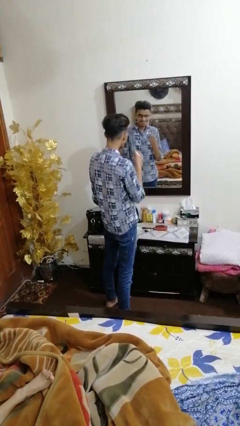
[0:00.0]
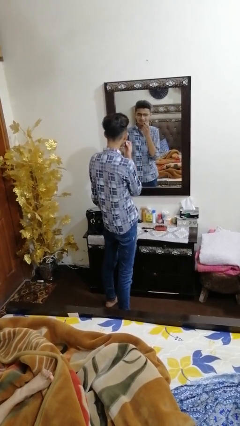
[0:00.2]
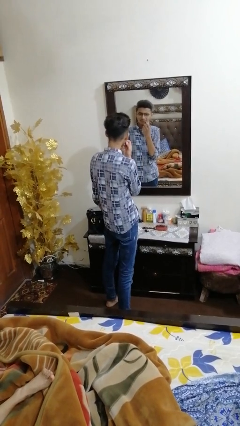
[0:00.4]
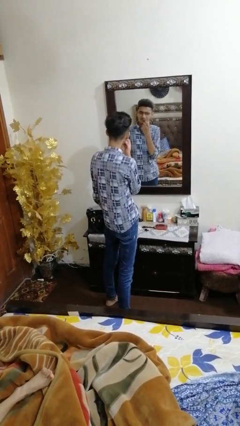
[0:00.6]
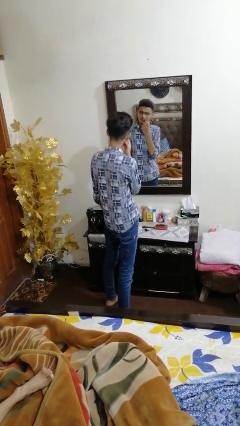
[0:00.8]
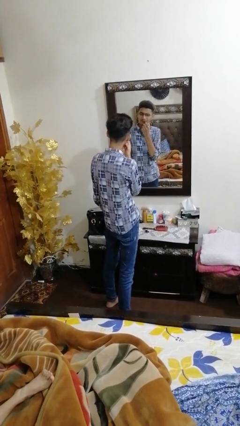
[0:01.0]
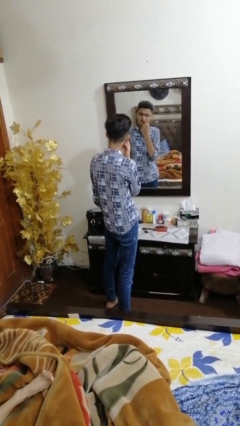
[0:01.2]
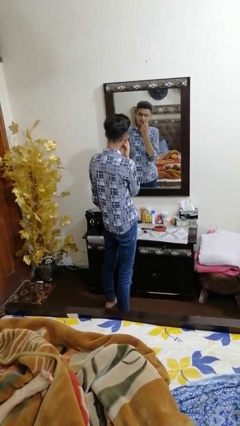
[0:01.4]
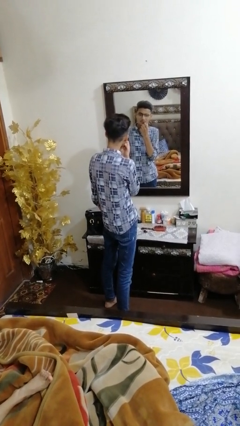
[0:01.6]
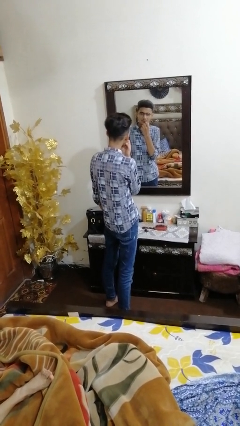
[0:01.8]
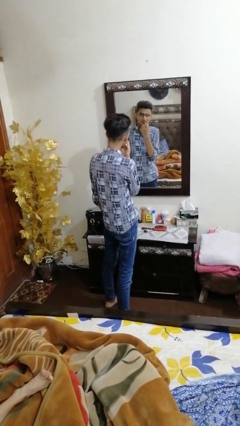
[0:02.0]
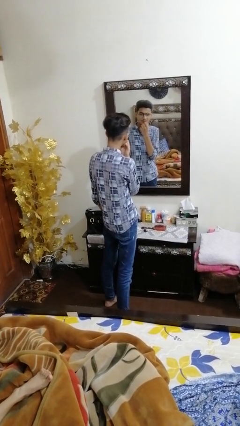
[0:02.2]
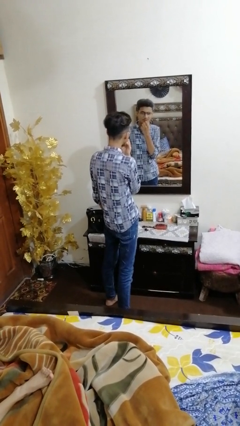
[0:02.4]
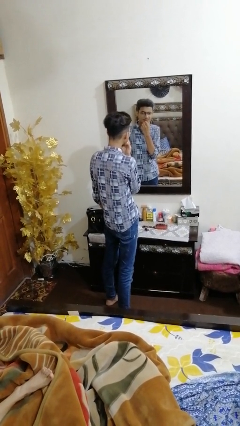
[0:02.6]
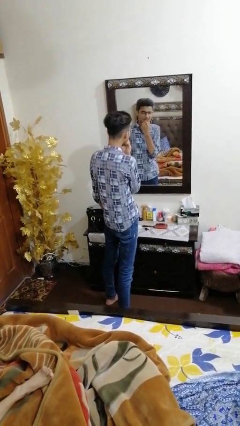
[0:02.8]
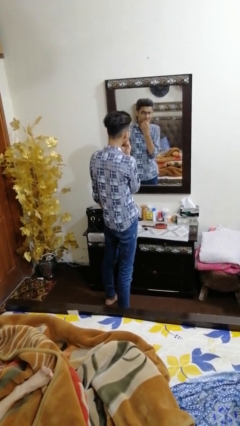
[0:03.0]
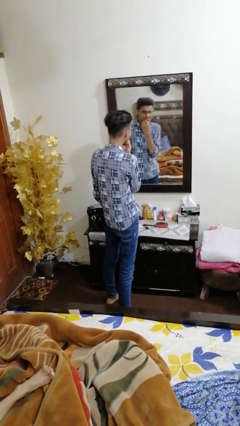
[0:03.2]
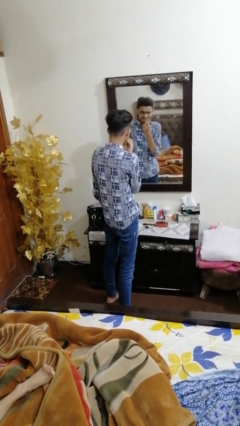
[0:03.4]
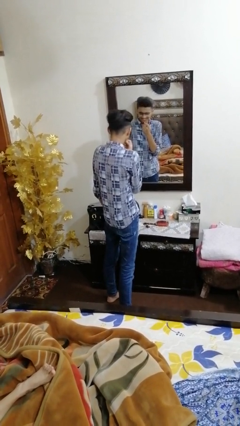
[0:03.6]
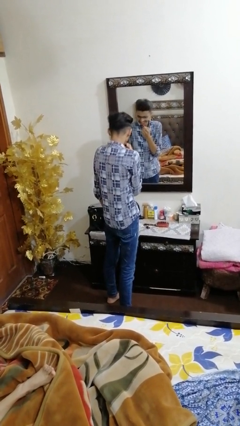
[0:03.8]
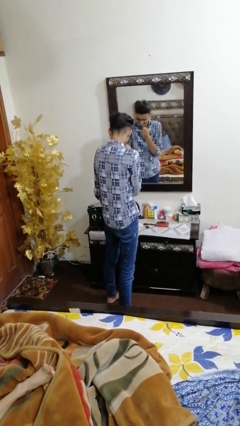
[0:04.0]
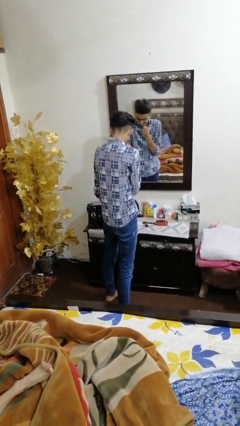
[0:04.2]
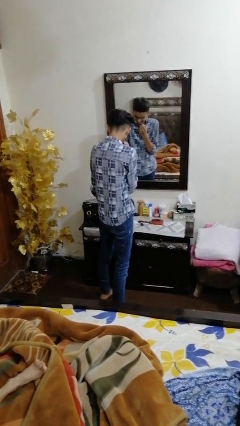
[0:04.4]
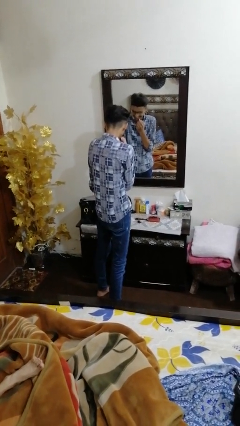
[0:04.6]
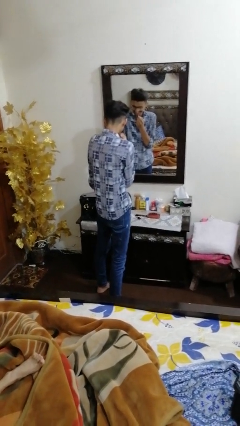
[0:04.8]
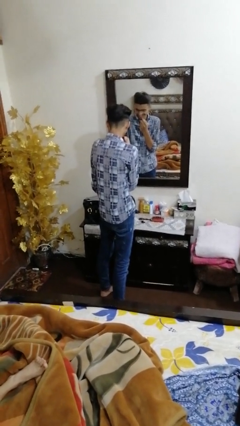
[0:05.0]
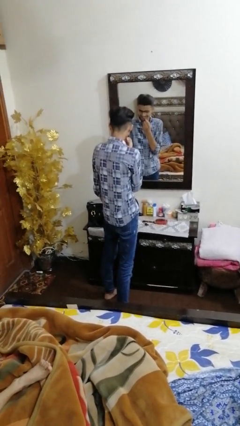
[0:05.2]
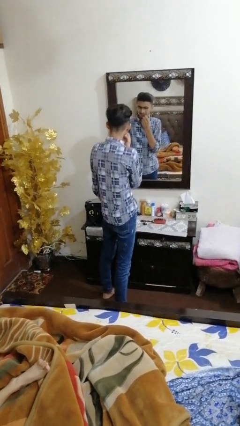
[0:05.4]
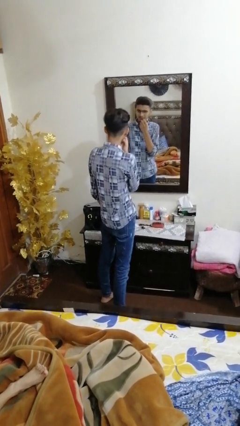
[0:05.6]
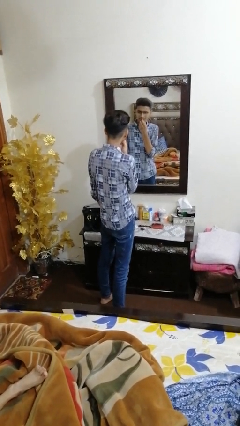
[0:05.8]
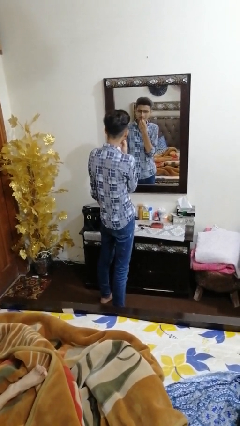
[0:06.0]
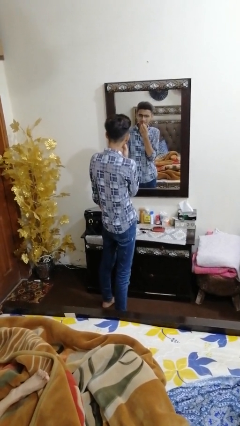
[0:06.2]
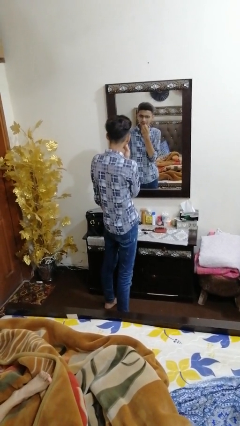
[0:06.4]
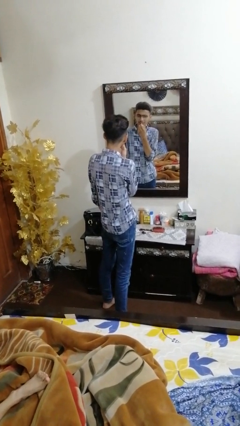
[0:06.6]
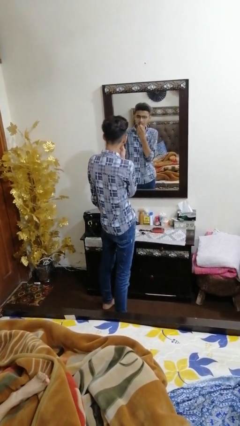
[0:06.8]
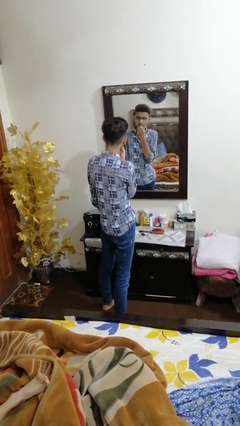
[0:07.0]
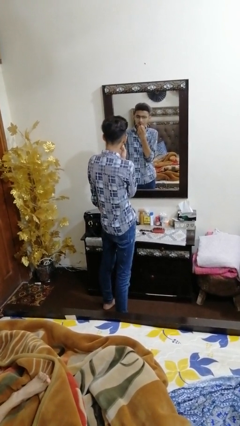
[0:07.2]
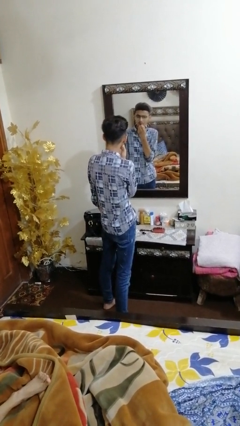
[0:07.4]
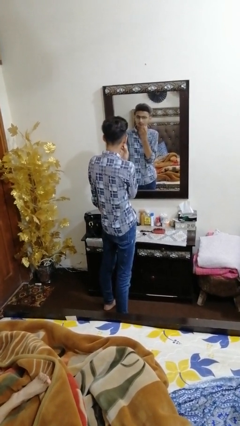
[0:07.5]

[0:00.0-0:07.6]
person applies lip makeup

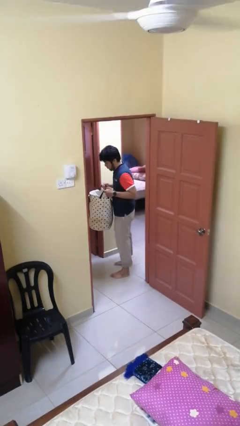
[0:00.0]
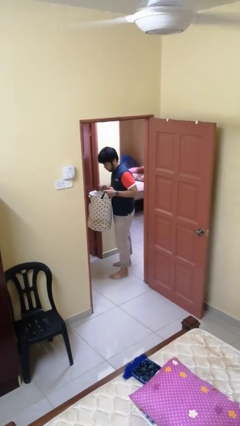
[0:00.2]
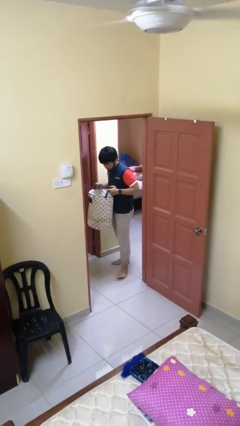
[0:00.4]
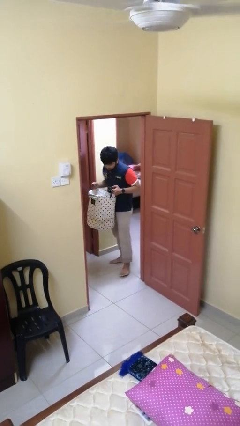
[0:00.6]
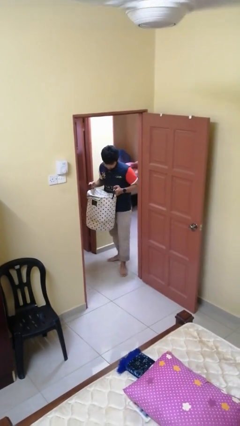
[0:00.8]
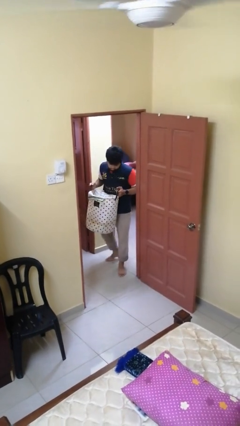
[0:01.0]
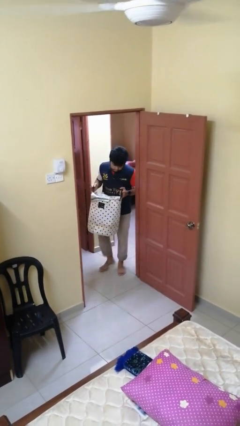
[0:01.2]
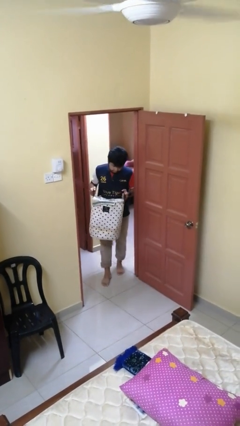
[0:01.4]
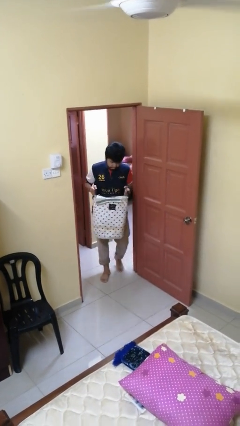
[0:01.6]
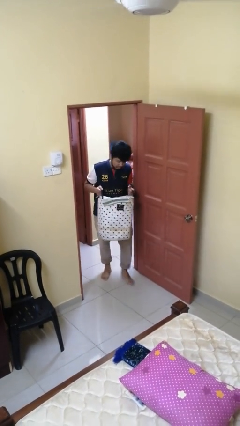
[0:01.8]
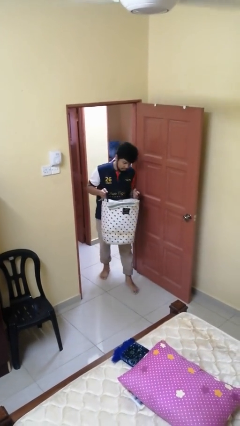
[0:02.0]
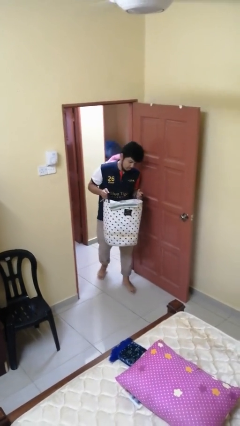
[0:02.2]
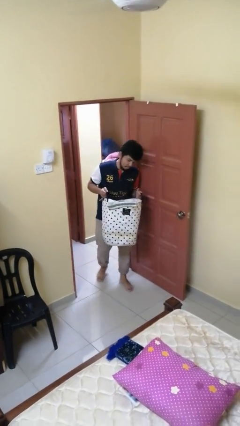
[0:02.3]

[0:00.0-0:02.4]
person carries laundry basket

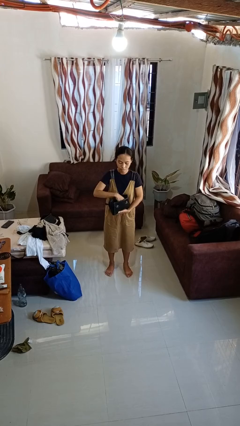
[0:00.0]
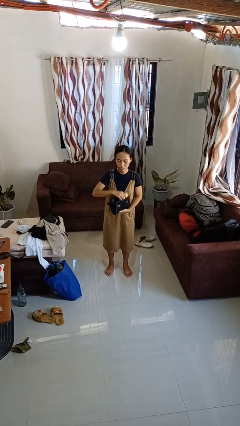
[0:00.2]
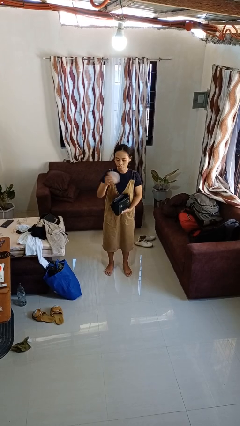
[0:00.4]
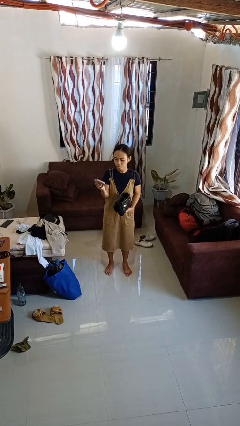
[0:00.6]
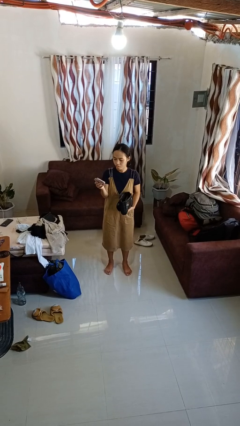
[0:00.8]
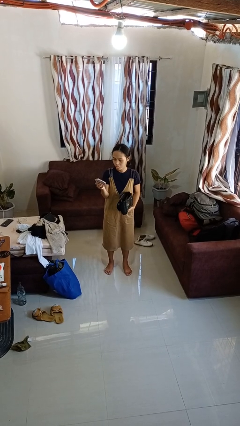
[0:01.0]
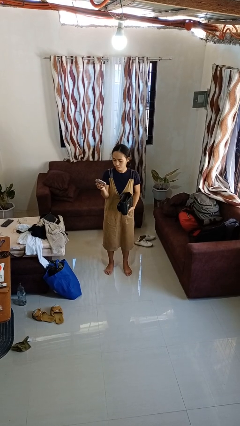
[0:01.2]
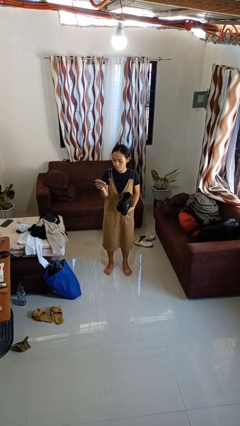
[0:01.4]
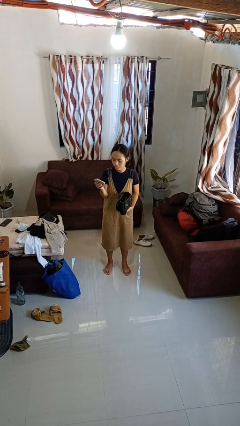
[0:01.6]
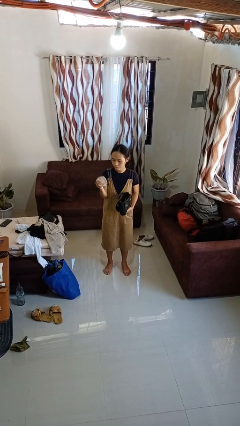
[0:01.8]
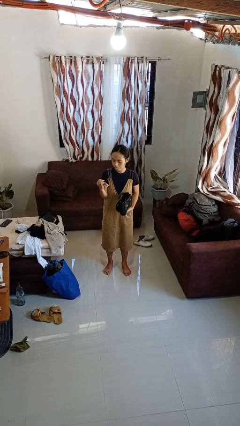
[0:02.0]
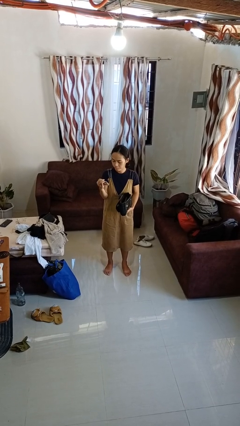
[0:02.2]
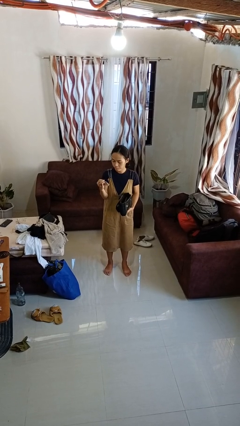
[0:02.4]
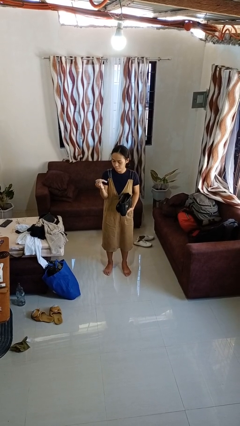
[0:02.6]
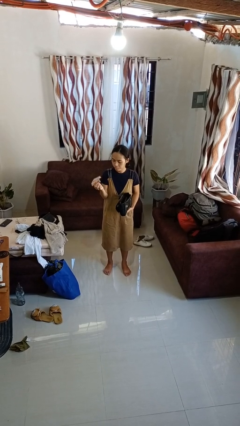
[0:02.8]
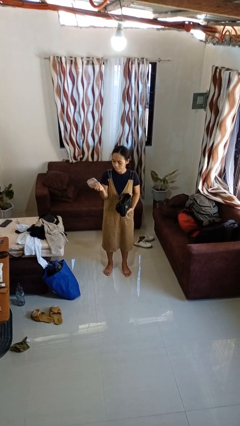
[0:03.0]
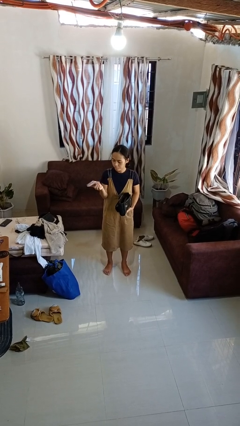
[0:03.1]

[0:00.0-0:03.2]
person takes object from purse

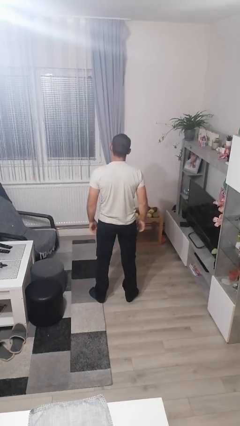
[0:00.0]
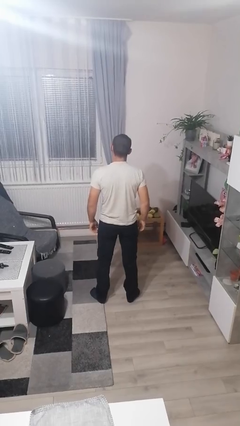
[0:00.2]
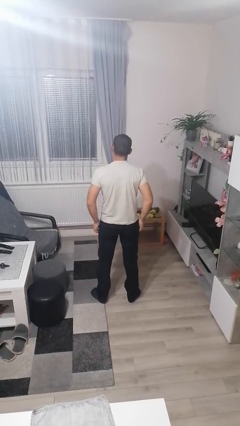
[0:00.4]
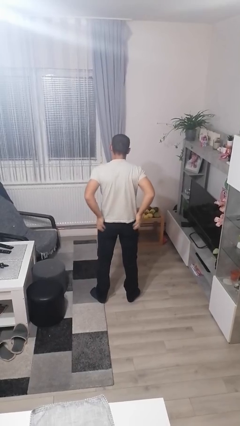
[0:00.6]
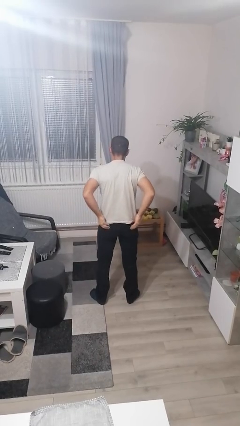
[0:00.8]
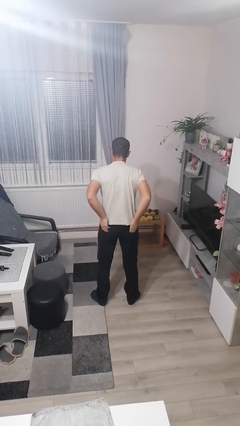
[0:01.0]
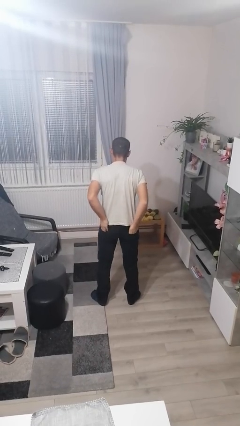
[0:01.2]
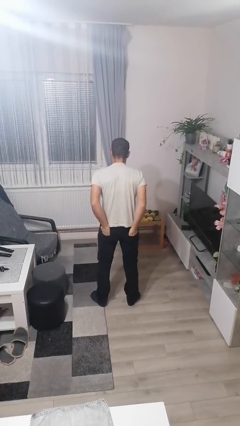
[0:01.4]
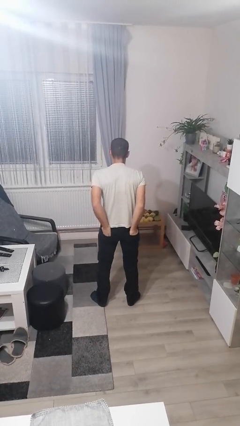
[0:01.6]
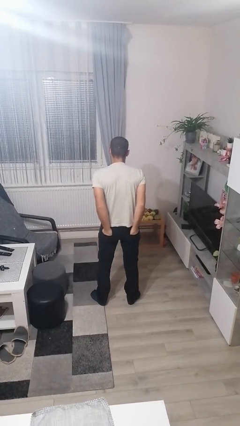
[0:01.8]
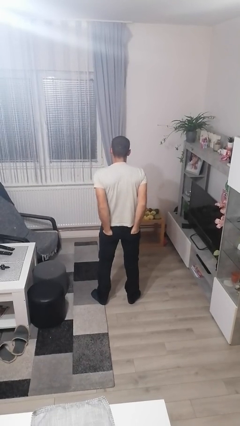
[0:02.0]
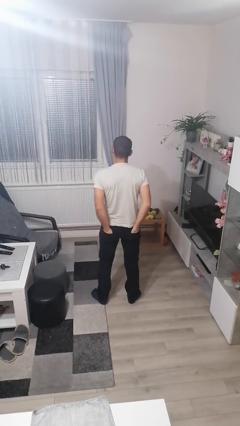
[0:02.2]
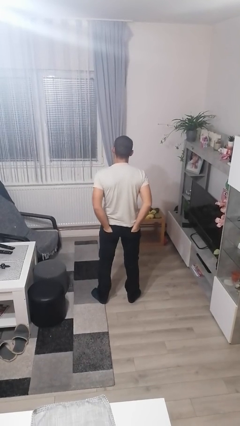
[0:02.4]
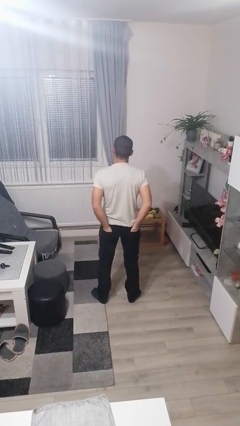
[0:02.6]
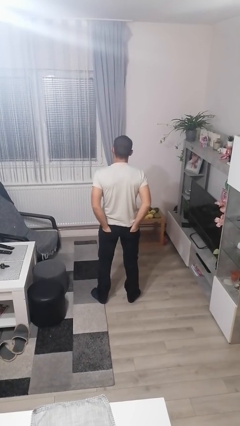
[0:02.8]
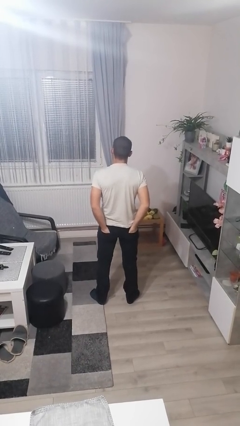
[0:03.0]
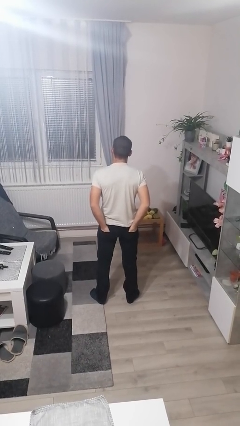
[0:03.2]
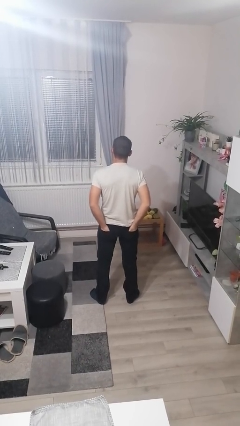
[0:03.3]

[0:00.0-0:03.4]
person puts hands in back pockets

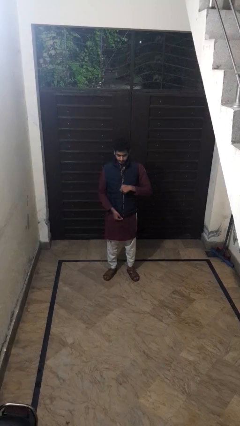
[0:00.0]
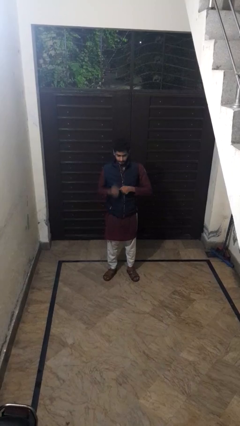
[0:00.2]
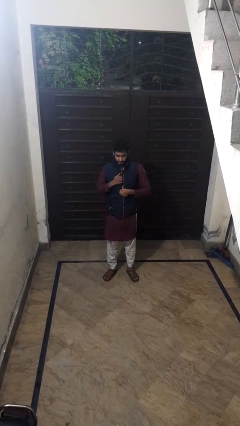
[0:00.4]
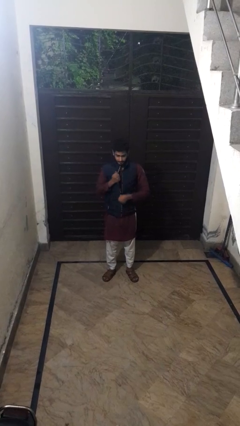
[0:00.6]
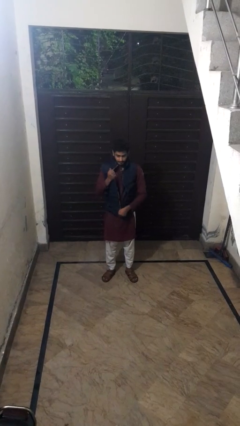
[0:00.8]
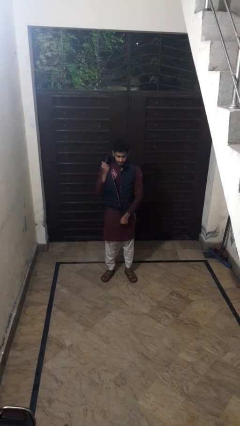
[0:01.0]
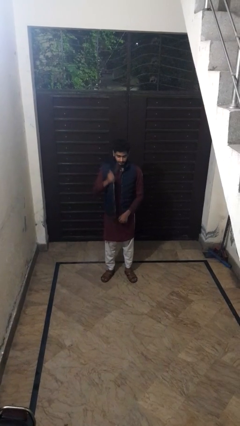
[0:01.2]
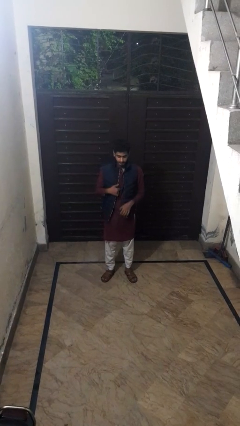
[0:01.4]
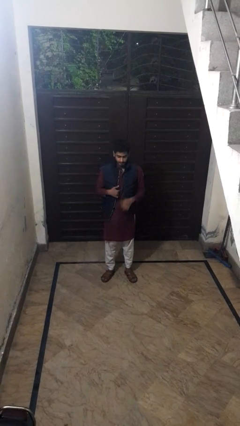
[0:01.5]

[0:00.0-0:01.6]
person unzips jacket
